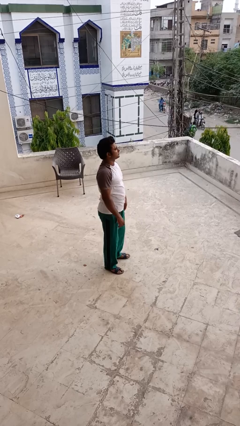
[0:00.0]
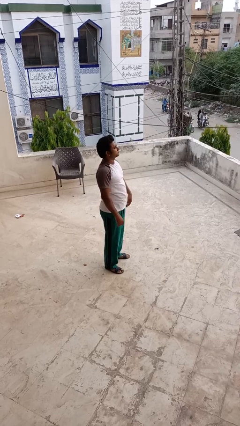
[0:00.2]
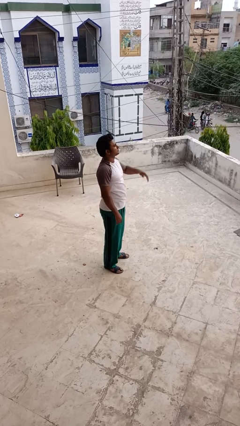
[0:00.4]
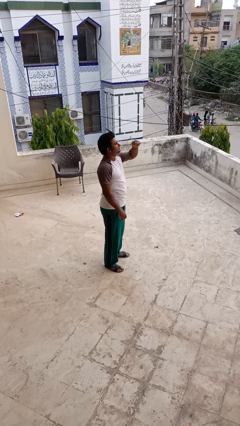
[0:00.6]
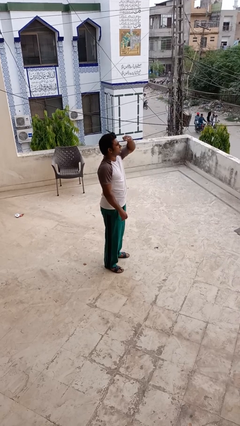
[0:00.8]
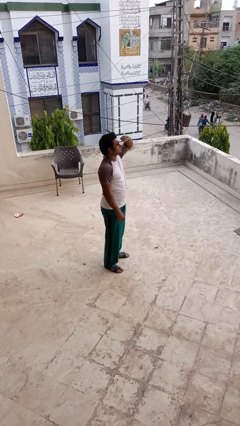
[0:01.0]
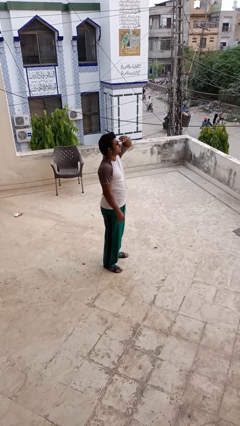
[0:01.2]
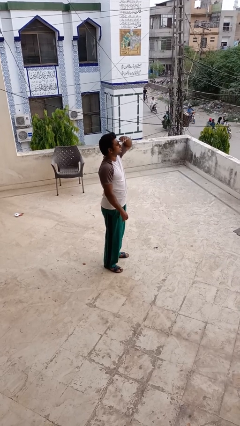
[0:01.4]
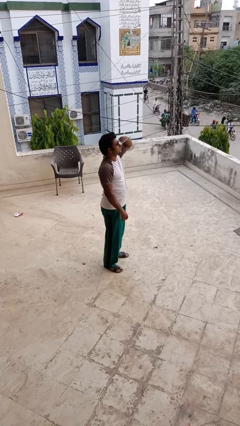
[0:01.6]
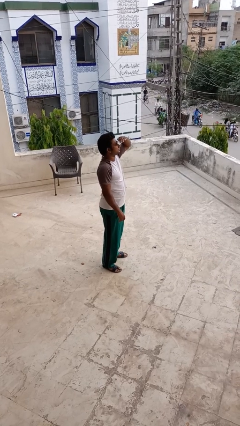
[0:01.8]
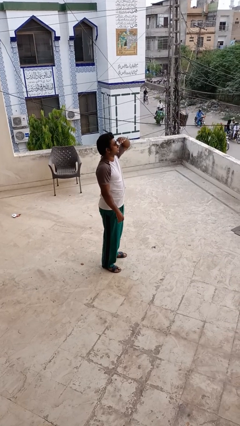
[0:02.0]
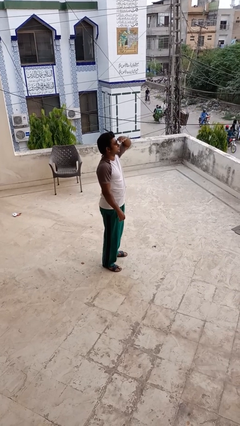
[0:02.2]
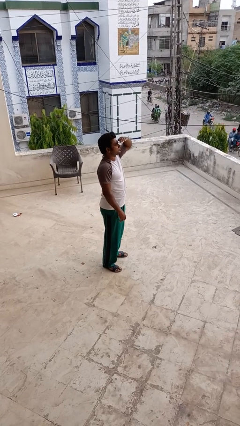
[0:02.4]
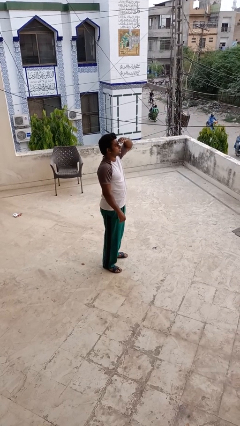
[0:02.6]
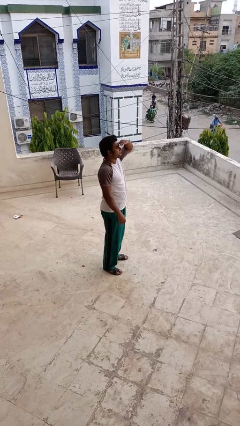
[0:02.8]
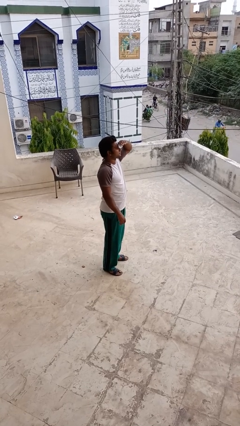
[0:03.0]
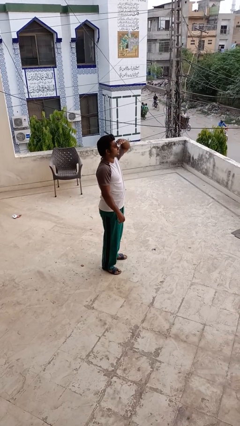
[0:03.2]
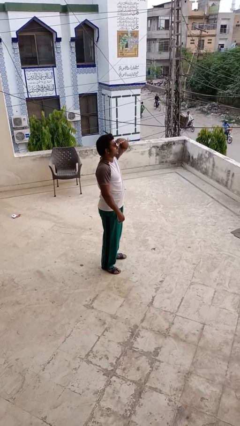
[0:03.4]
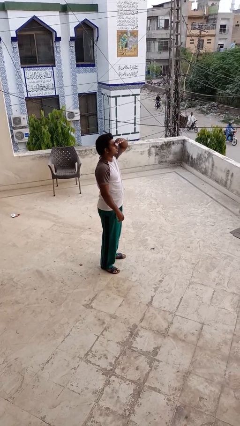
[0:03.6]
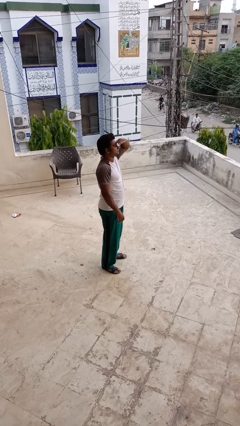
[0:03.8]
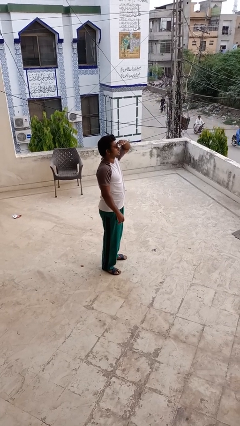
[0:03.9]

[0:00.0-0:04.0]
person shades eyes

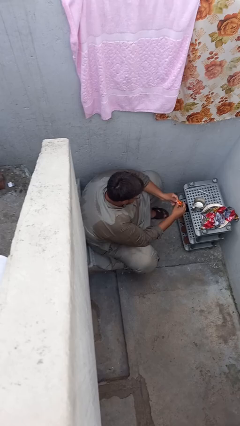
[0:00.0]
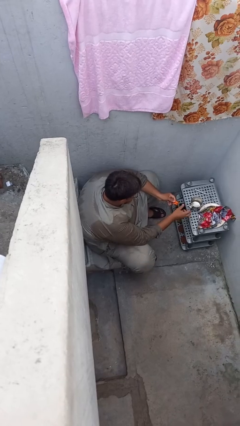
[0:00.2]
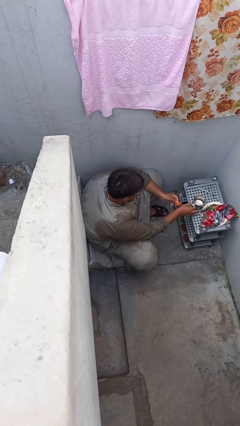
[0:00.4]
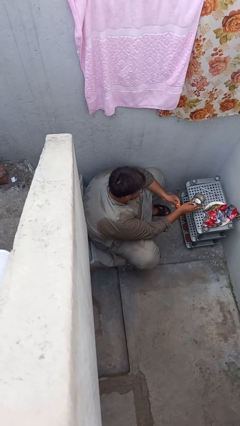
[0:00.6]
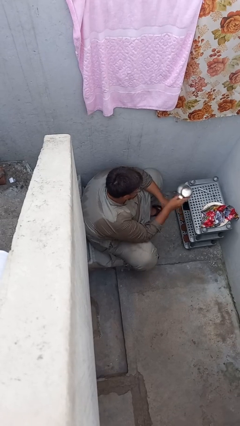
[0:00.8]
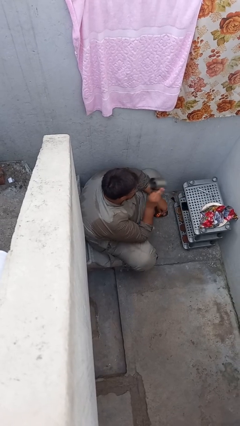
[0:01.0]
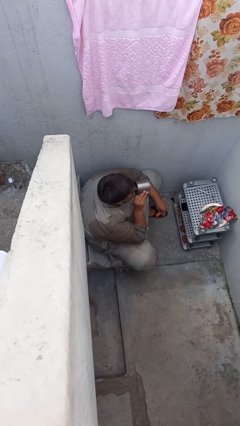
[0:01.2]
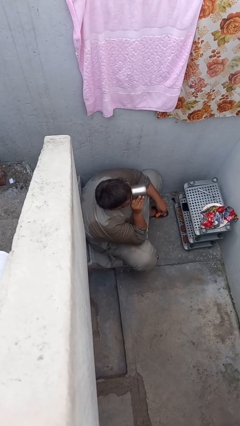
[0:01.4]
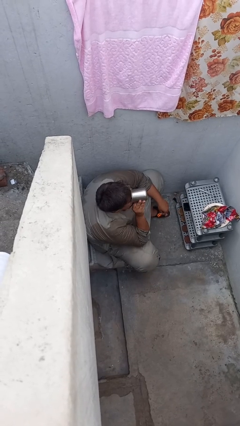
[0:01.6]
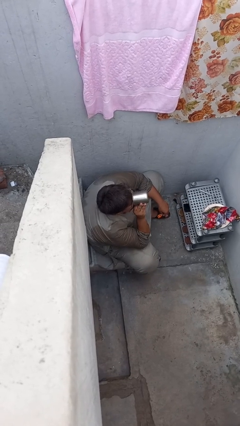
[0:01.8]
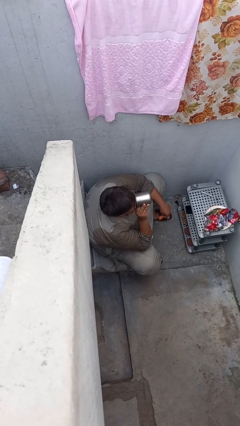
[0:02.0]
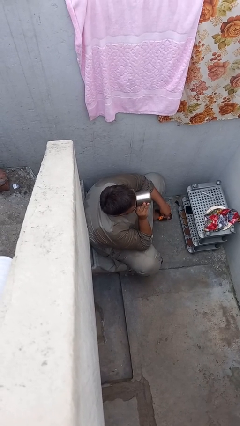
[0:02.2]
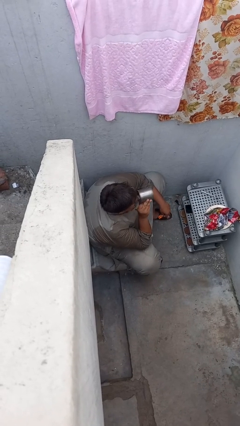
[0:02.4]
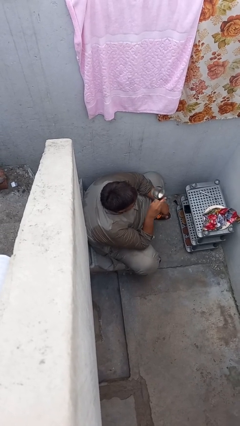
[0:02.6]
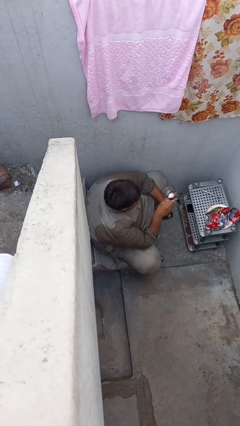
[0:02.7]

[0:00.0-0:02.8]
person drinks from cup

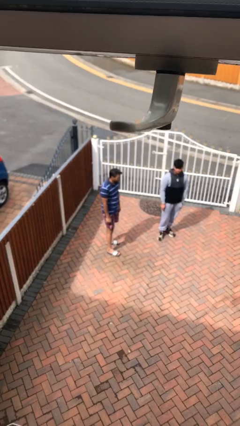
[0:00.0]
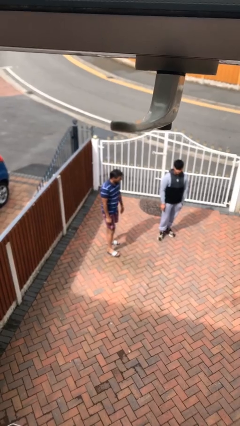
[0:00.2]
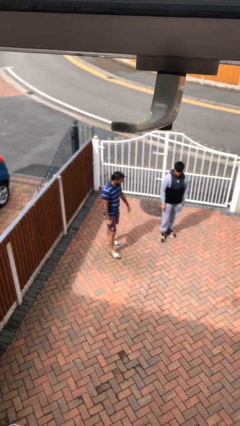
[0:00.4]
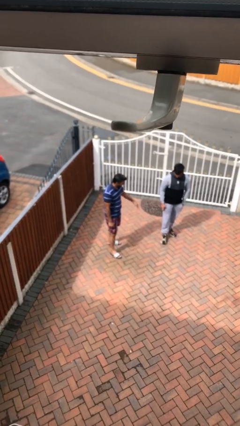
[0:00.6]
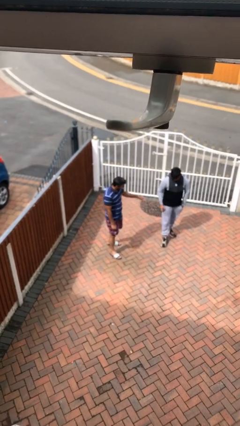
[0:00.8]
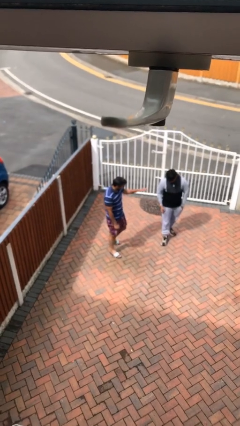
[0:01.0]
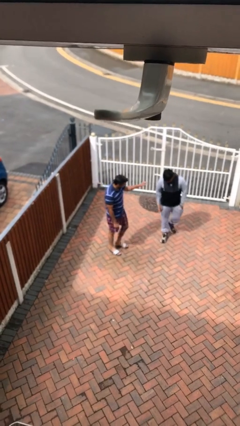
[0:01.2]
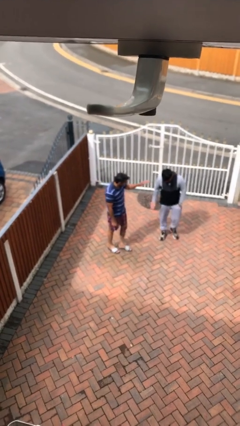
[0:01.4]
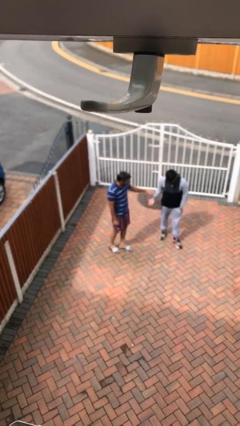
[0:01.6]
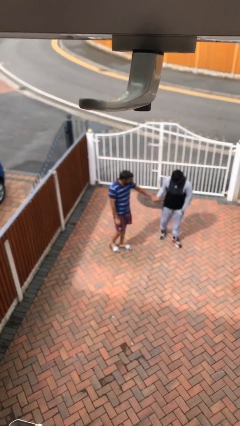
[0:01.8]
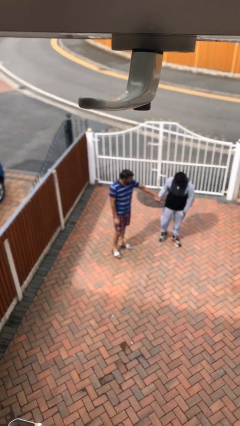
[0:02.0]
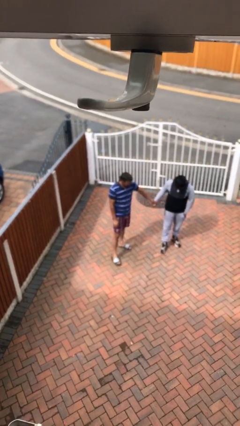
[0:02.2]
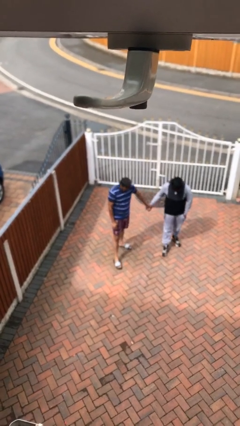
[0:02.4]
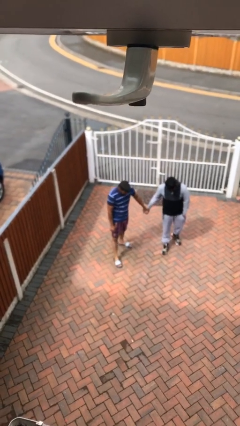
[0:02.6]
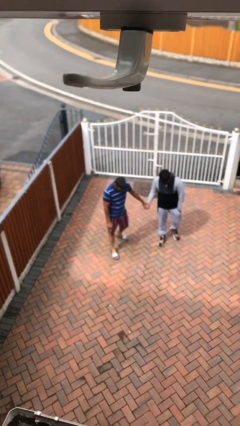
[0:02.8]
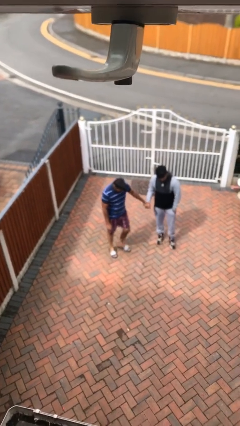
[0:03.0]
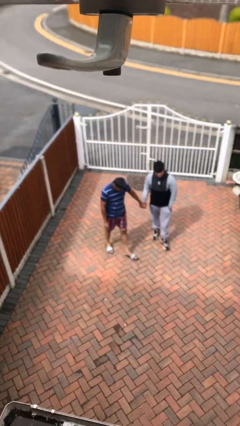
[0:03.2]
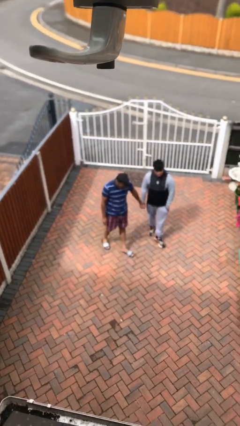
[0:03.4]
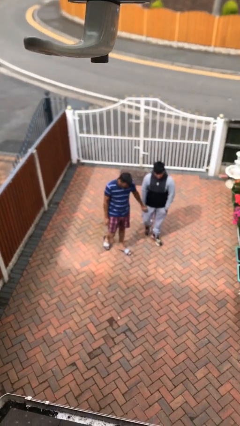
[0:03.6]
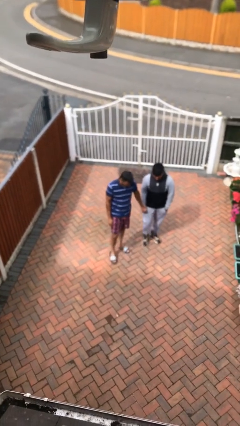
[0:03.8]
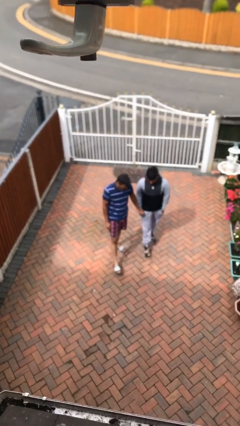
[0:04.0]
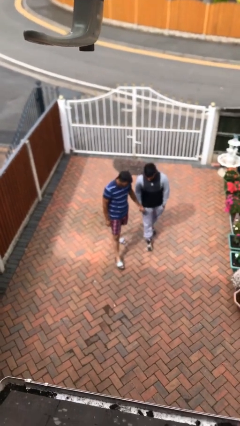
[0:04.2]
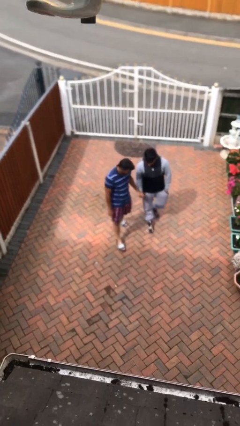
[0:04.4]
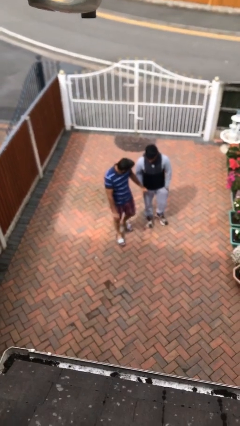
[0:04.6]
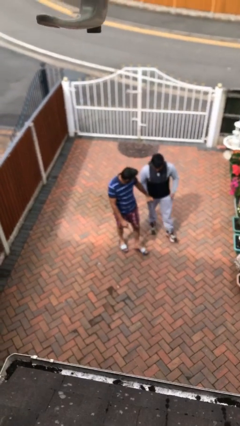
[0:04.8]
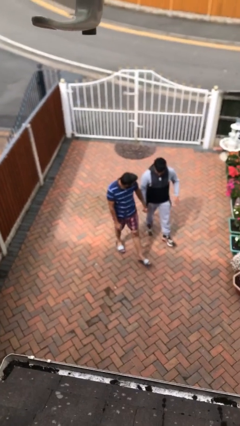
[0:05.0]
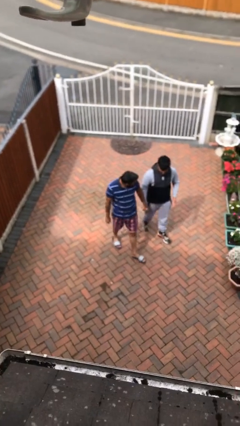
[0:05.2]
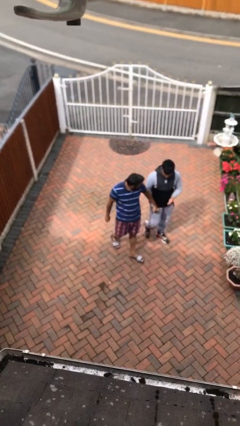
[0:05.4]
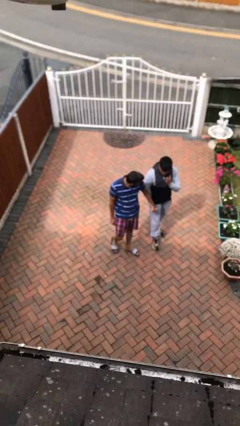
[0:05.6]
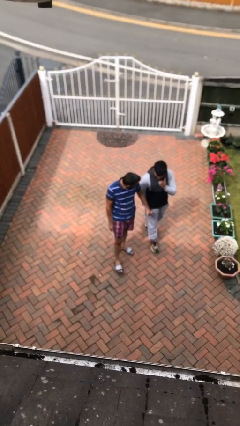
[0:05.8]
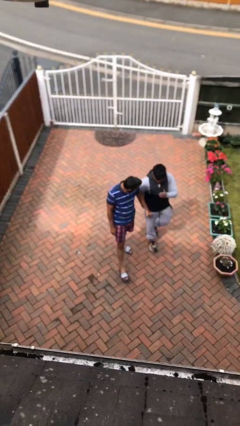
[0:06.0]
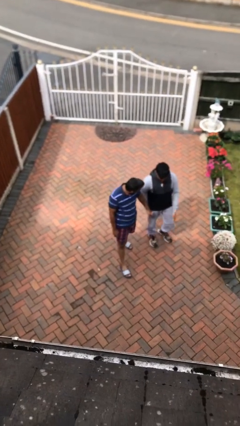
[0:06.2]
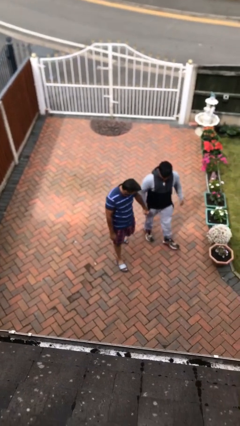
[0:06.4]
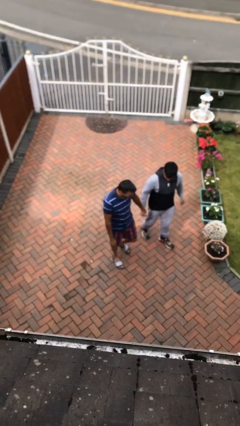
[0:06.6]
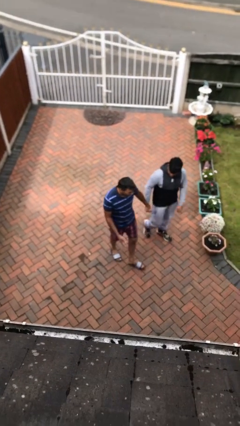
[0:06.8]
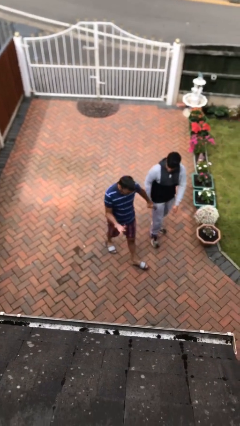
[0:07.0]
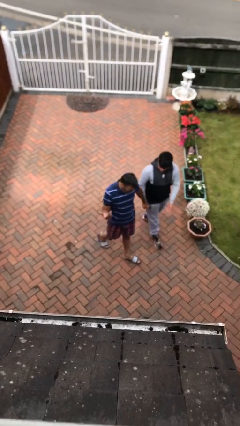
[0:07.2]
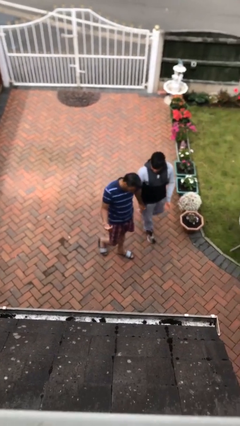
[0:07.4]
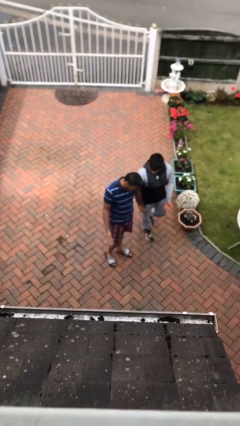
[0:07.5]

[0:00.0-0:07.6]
person holds hand

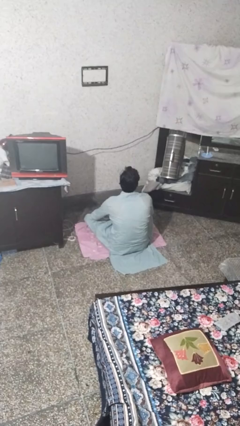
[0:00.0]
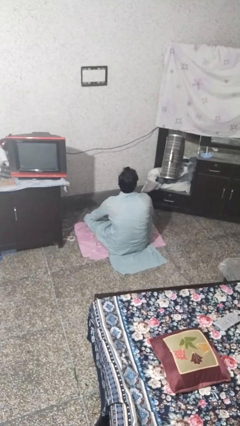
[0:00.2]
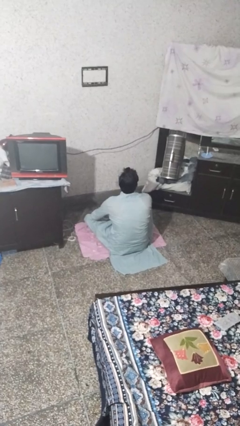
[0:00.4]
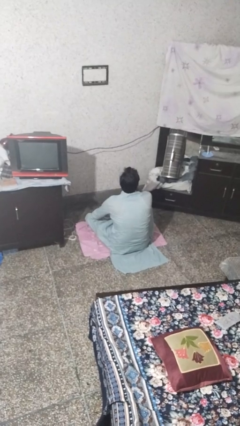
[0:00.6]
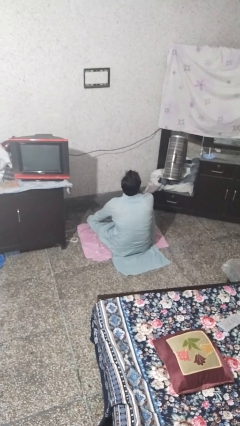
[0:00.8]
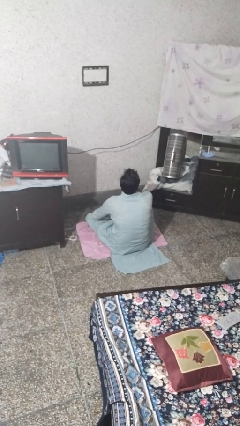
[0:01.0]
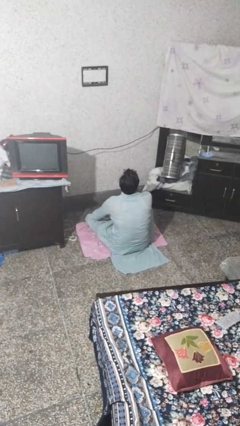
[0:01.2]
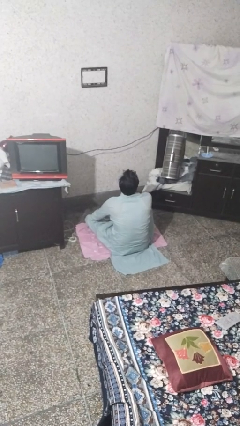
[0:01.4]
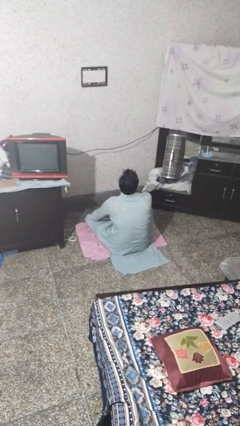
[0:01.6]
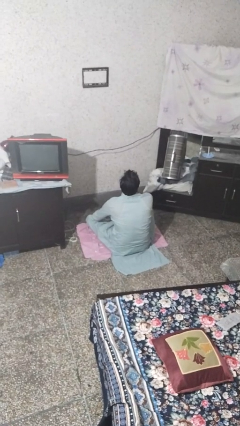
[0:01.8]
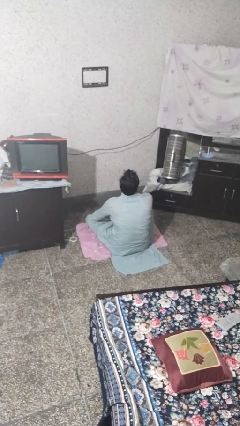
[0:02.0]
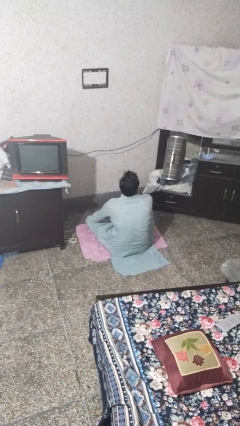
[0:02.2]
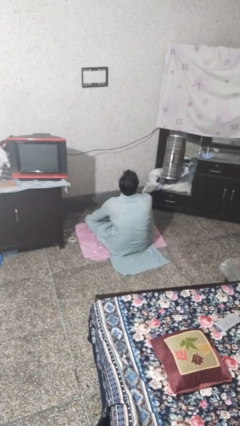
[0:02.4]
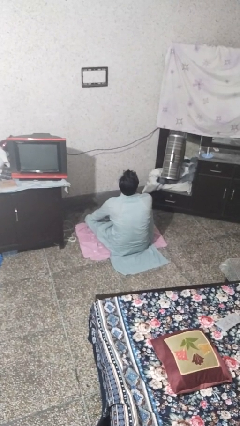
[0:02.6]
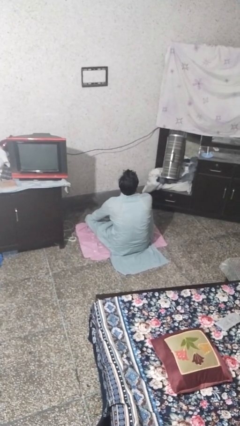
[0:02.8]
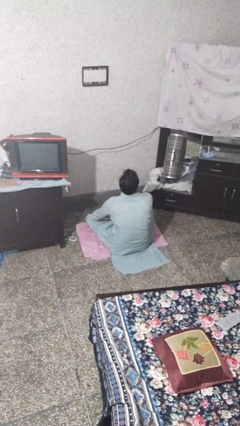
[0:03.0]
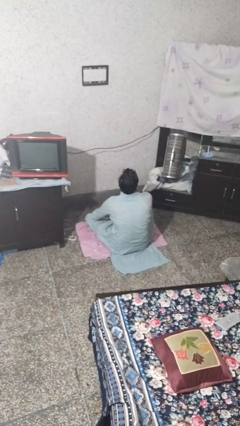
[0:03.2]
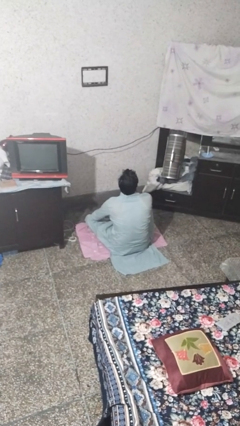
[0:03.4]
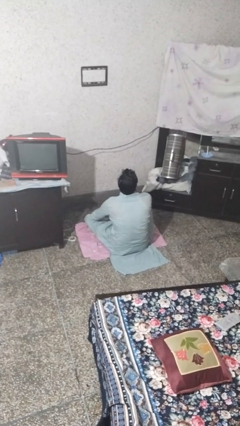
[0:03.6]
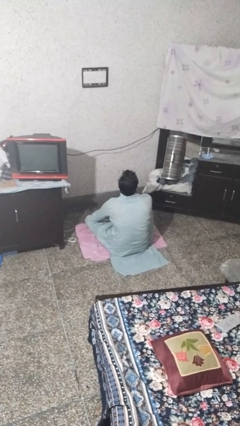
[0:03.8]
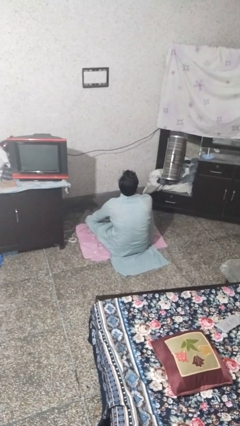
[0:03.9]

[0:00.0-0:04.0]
person licks fingers
